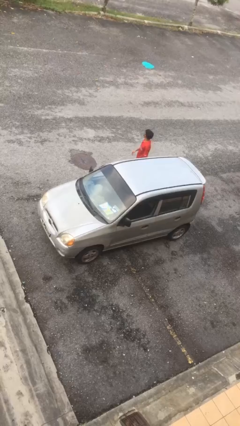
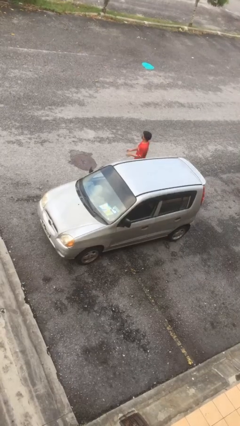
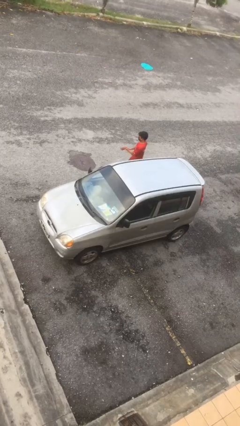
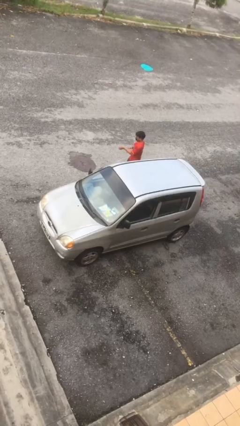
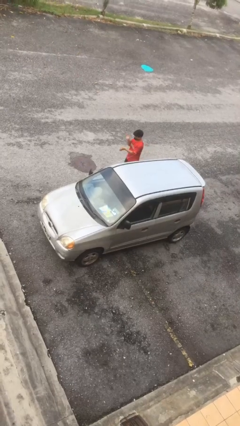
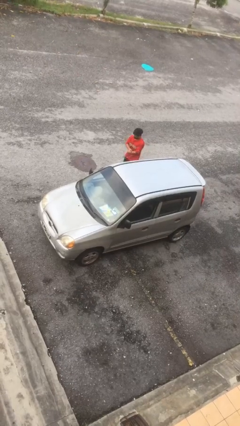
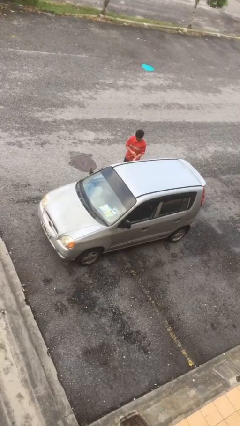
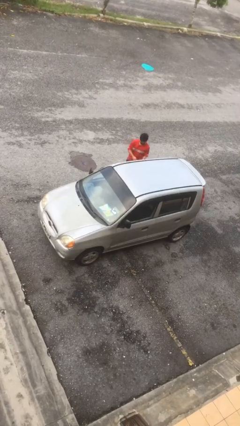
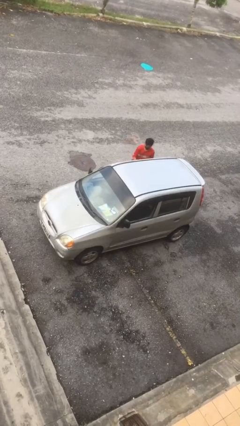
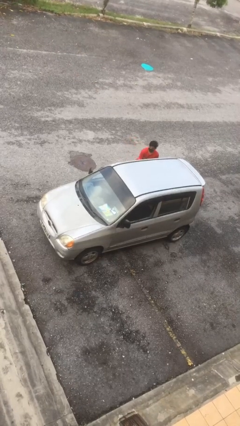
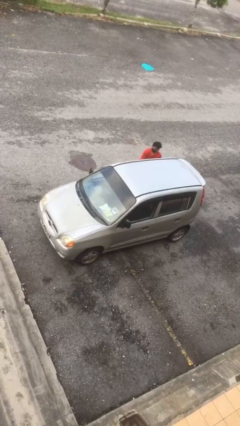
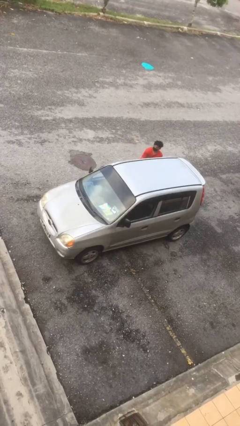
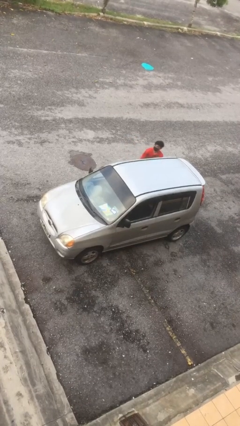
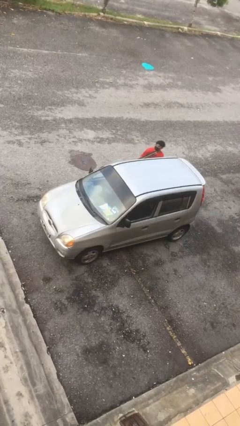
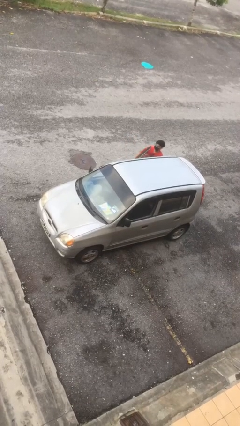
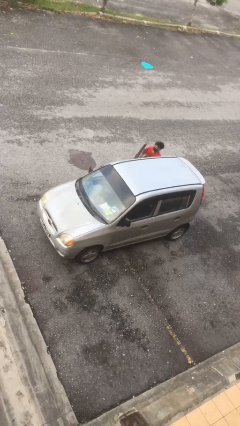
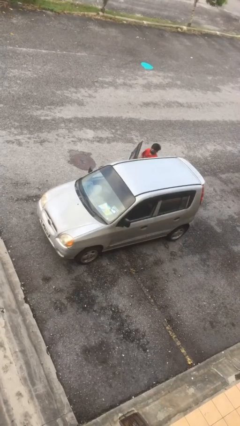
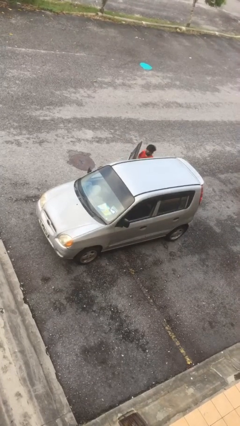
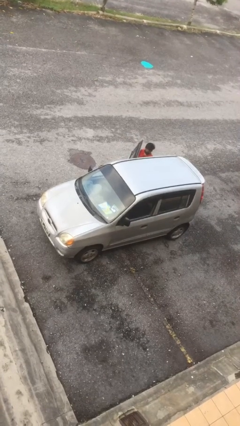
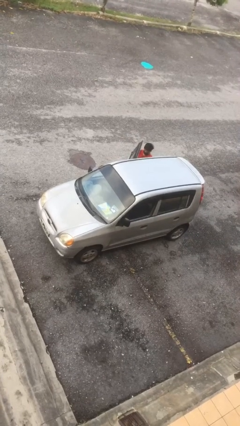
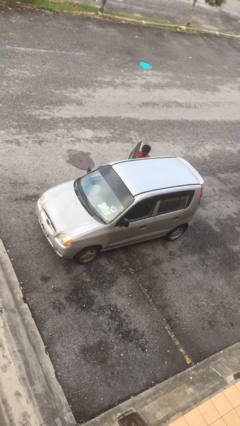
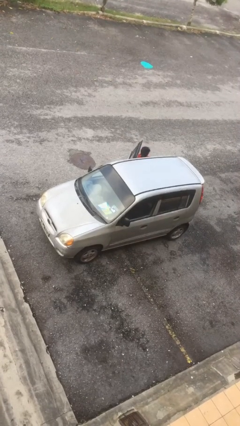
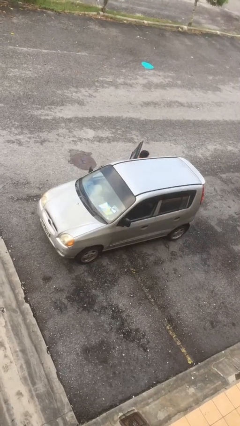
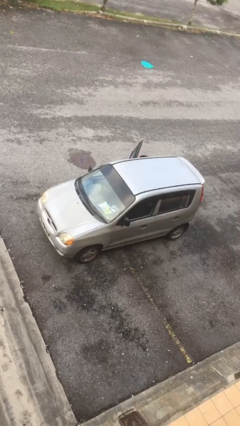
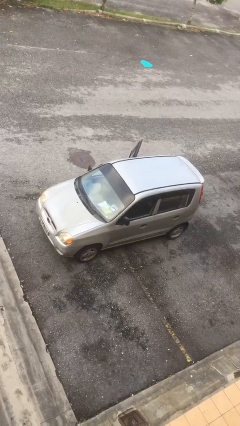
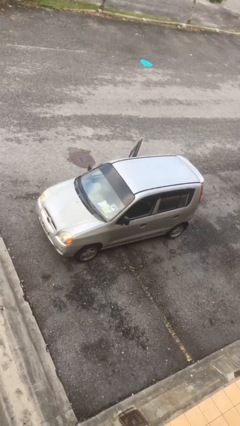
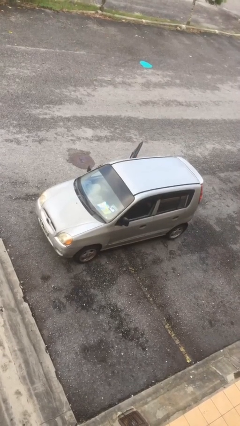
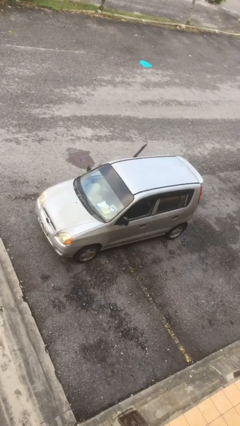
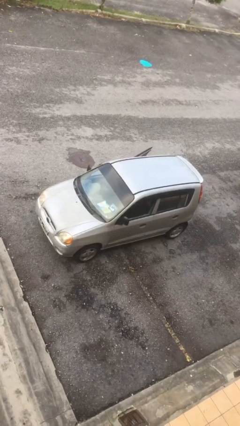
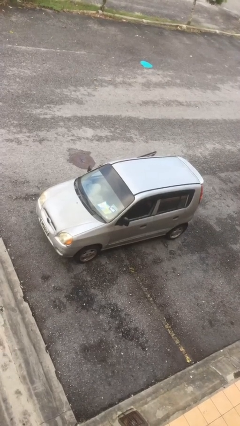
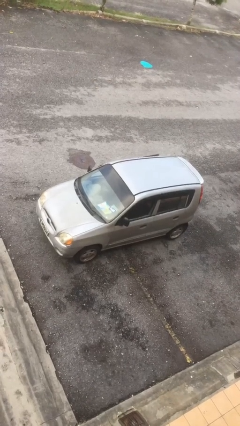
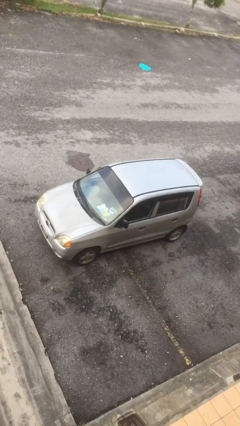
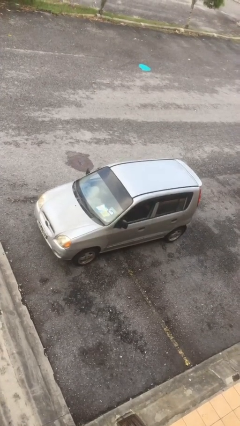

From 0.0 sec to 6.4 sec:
car picks up person

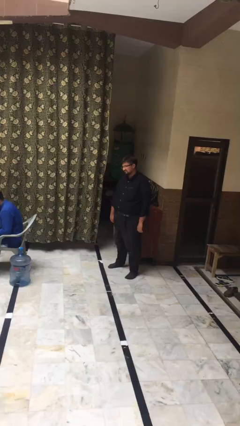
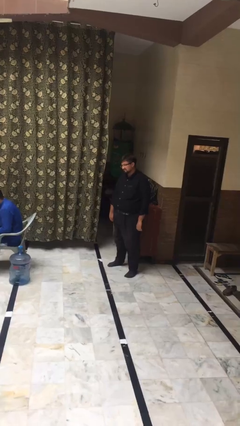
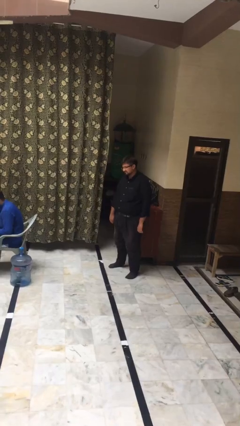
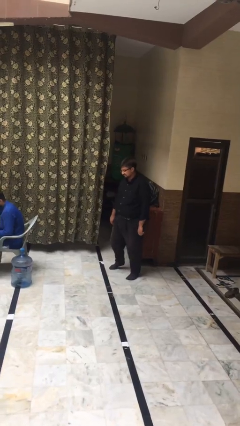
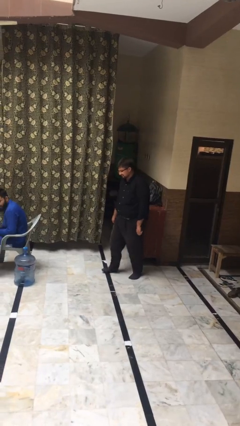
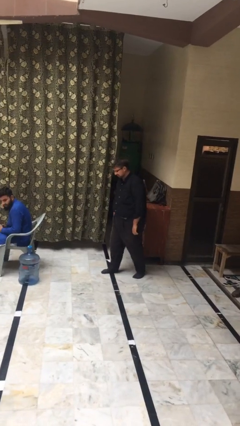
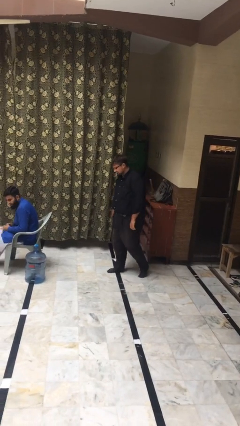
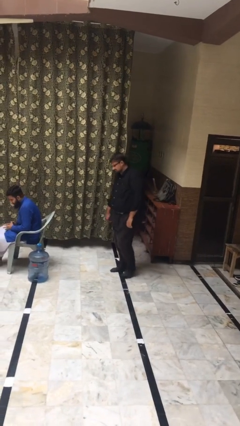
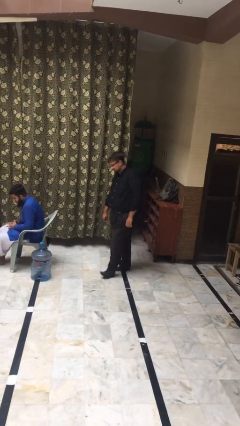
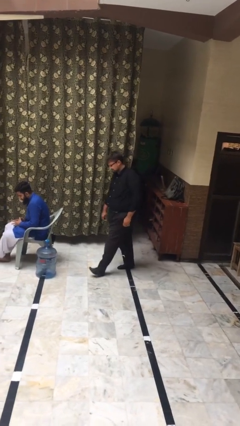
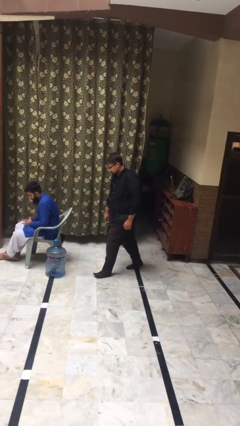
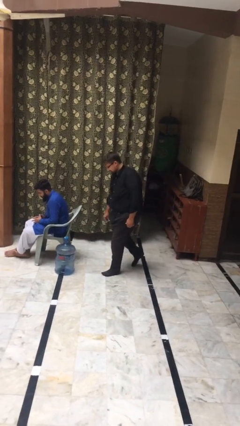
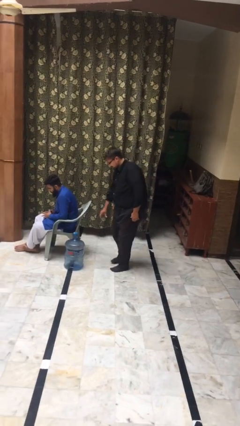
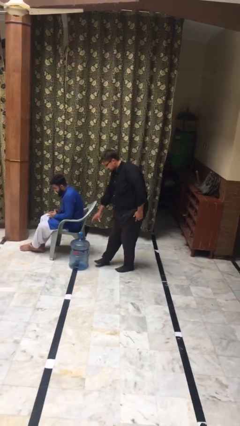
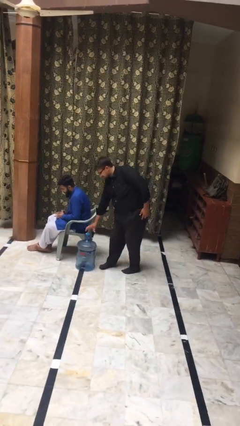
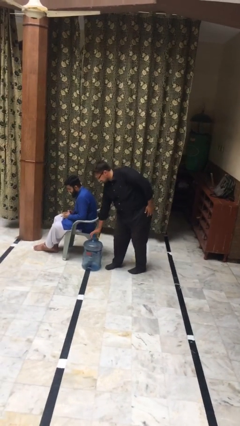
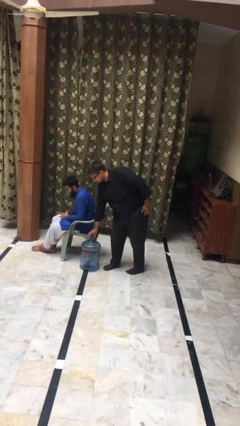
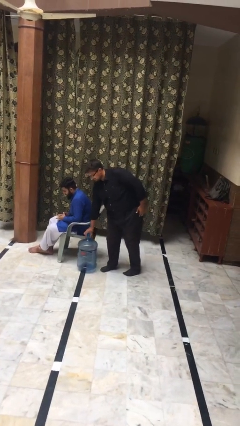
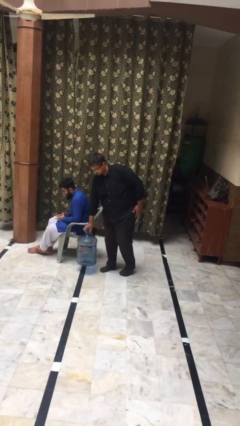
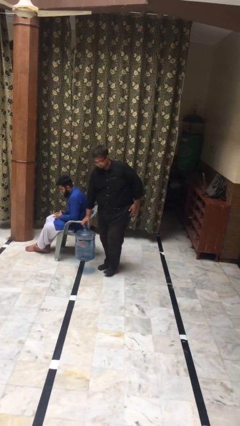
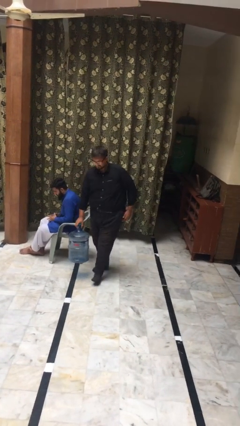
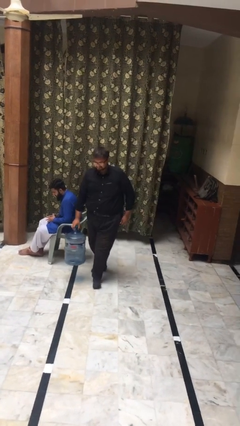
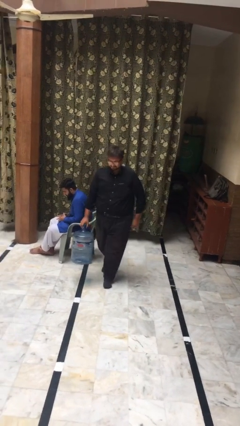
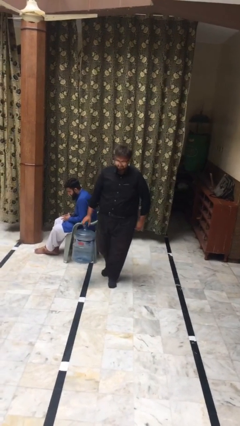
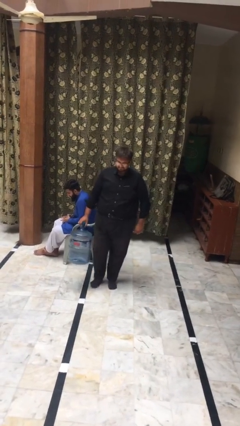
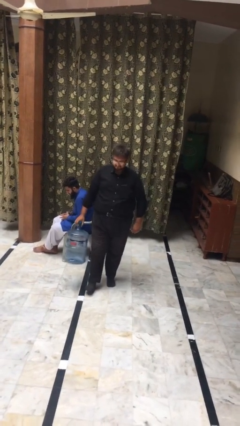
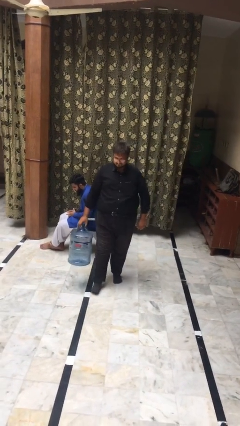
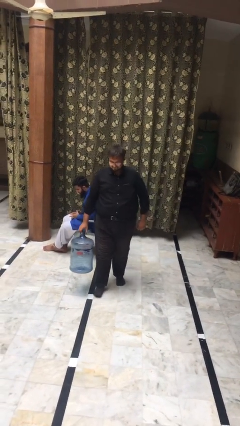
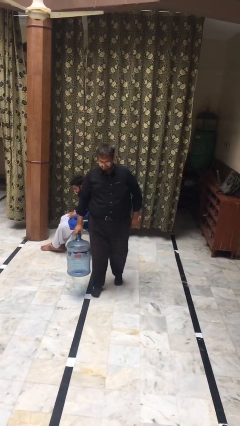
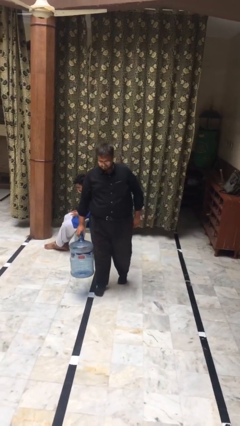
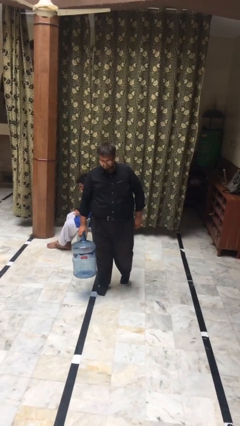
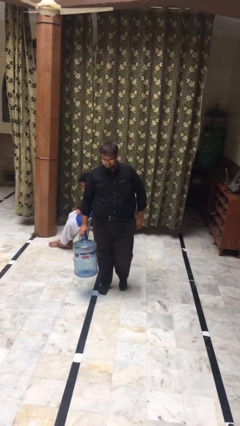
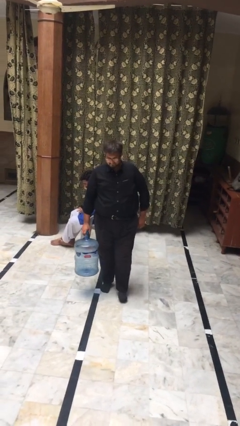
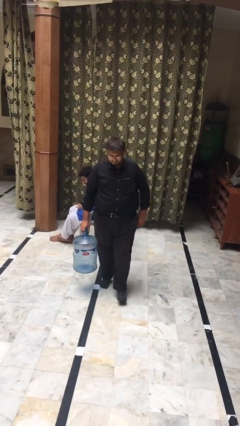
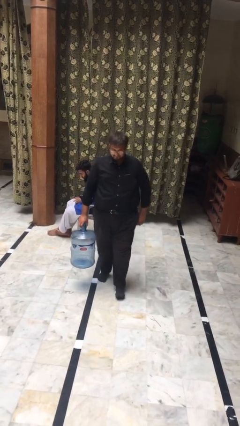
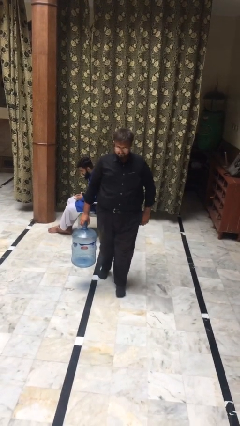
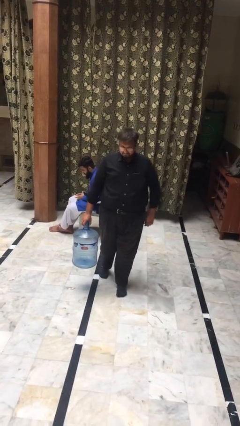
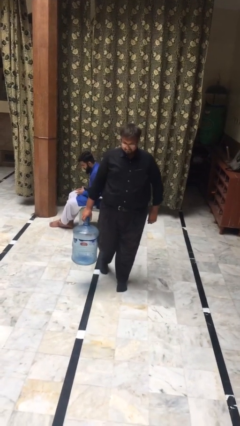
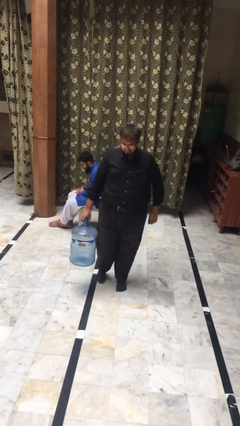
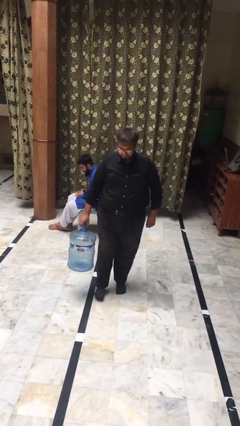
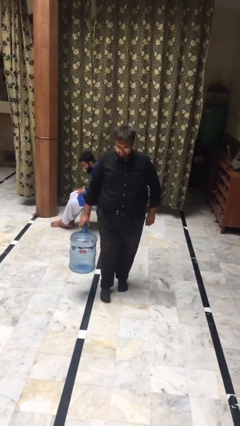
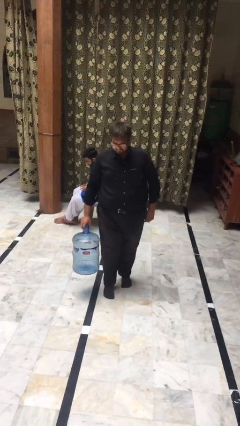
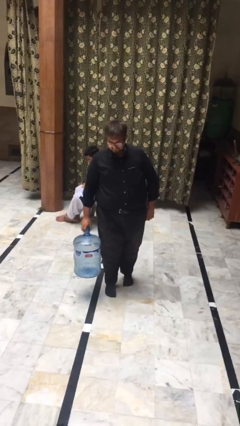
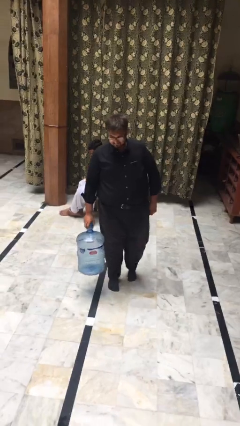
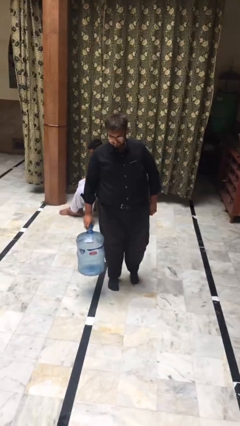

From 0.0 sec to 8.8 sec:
person steals object from person

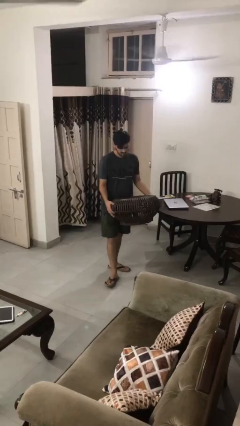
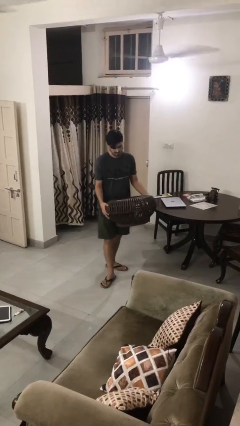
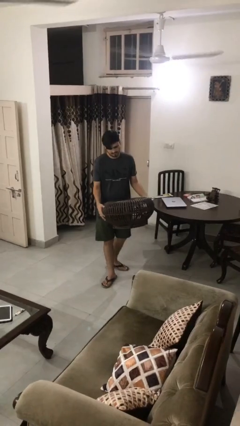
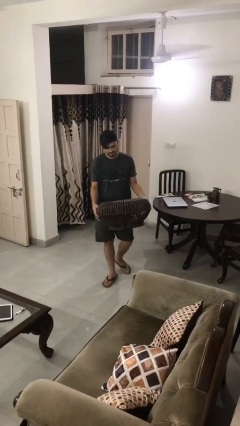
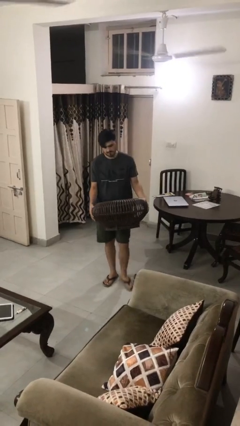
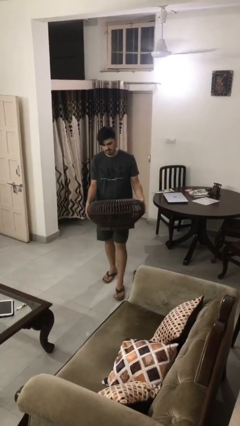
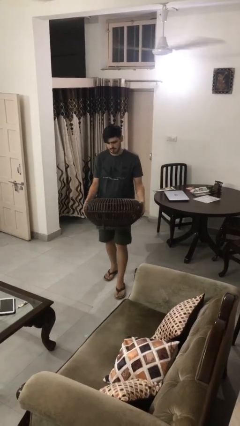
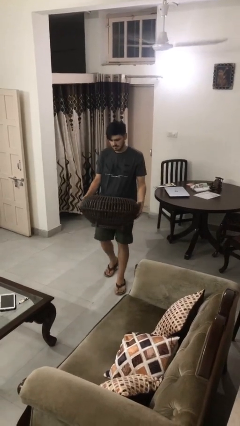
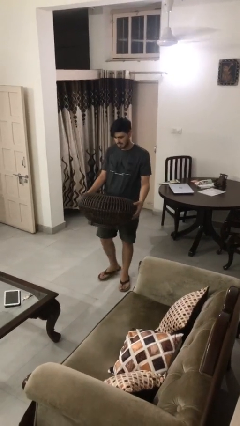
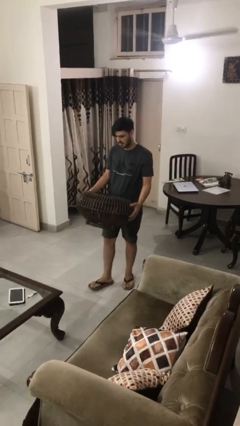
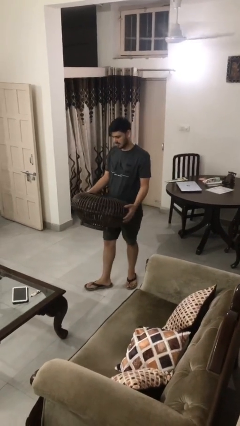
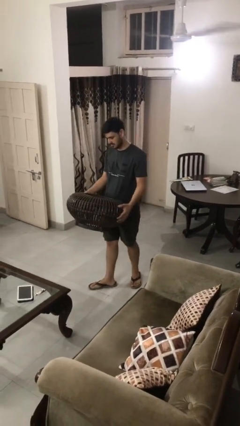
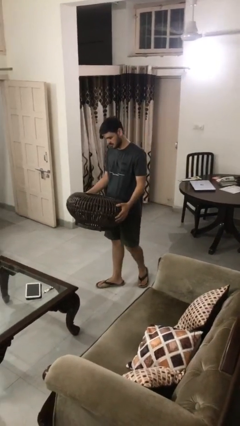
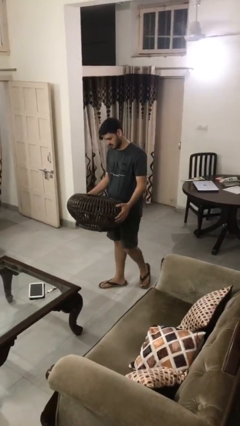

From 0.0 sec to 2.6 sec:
person carries furniture
